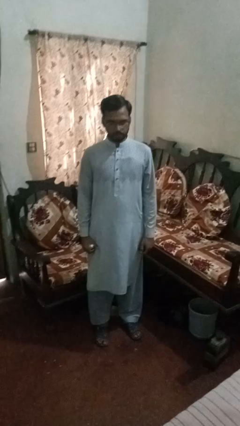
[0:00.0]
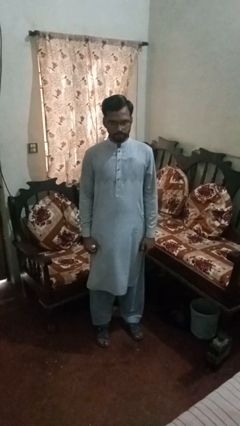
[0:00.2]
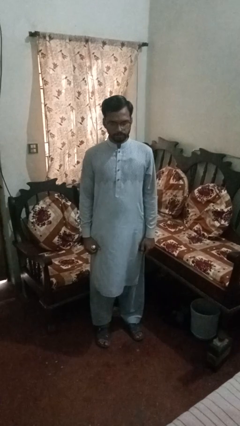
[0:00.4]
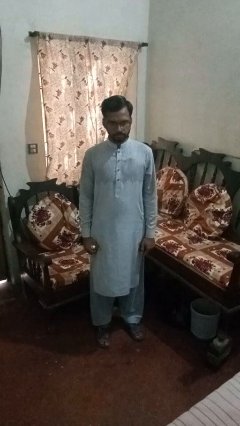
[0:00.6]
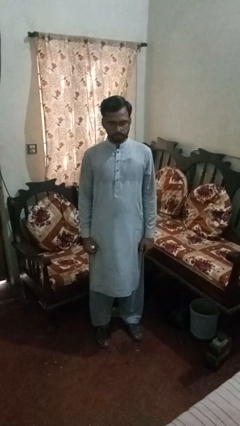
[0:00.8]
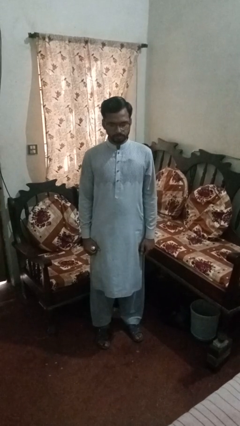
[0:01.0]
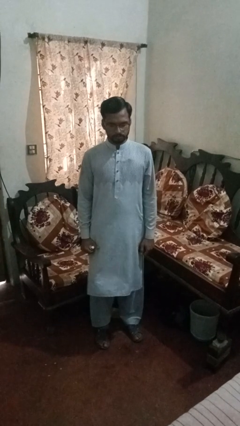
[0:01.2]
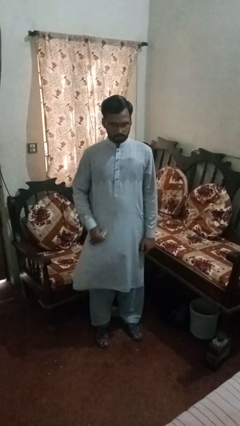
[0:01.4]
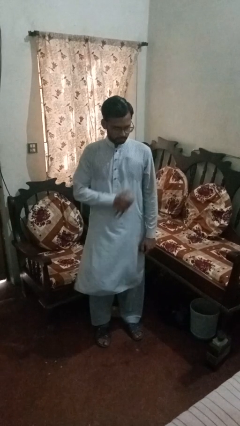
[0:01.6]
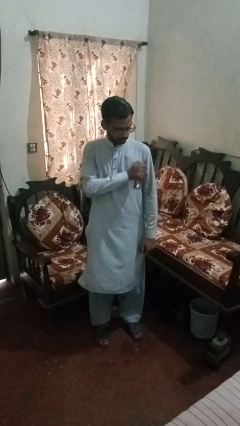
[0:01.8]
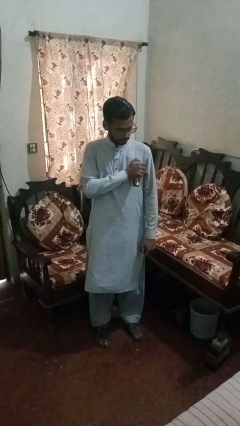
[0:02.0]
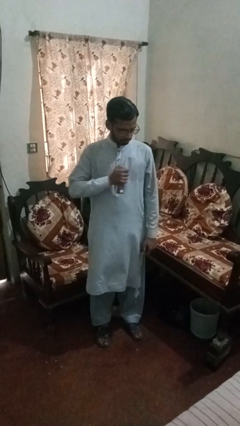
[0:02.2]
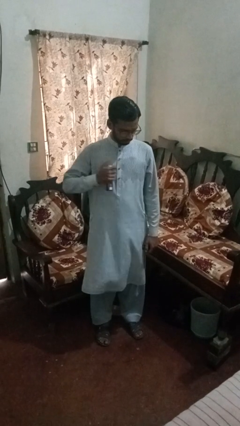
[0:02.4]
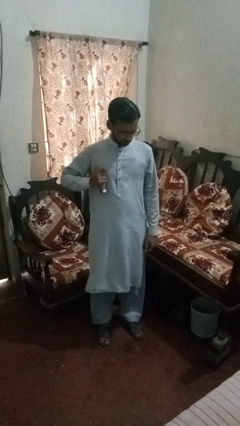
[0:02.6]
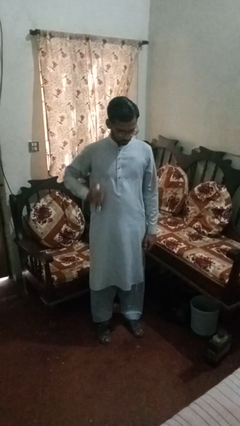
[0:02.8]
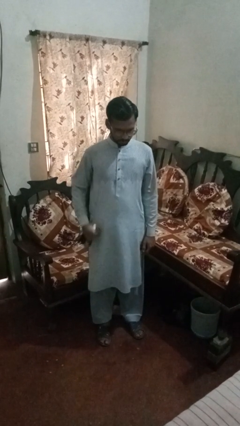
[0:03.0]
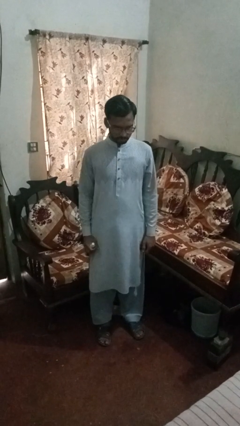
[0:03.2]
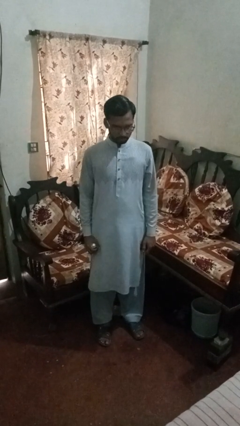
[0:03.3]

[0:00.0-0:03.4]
person applies deodorant

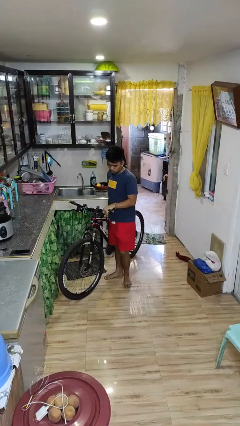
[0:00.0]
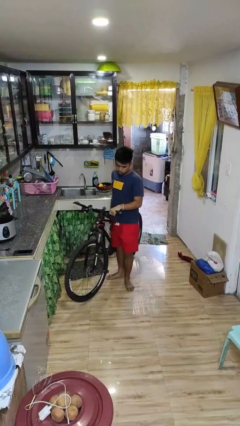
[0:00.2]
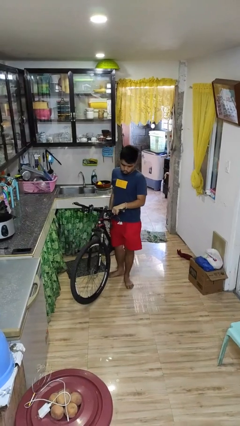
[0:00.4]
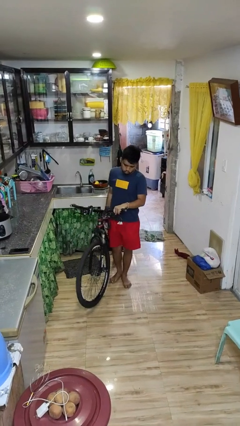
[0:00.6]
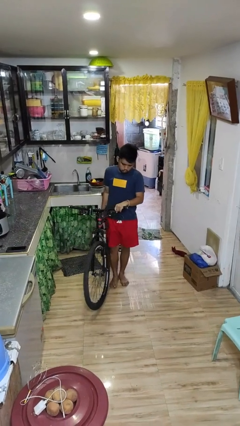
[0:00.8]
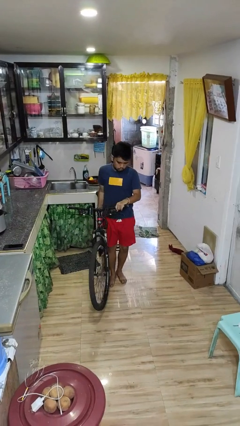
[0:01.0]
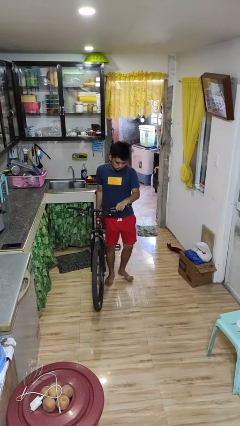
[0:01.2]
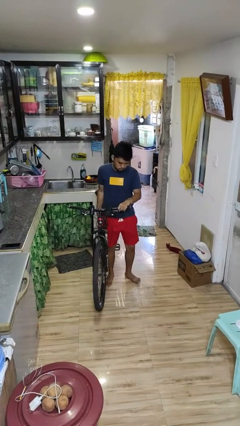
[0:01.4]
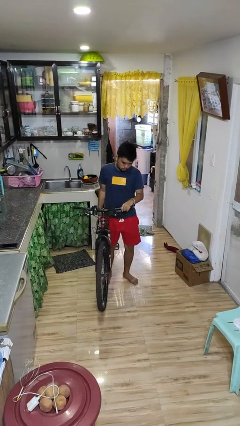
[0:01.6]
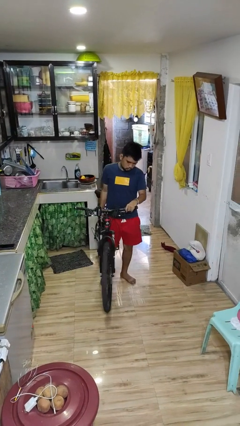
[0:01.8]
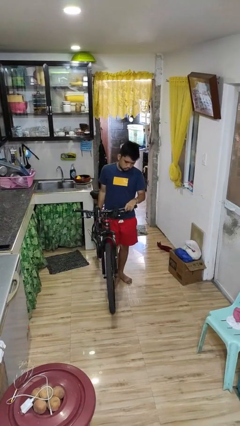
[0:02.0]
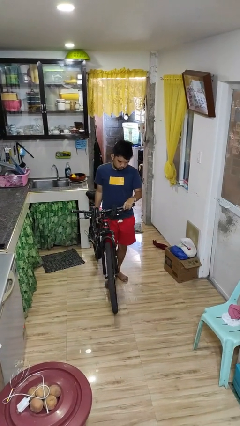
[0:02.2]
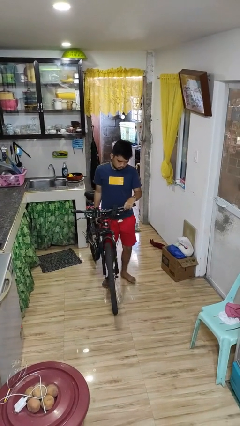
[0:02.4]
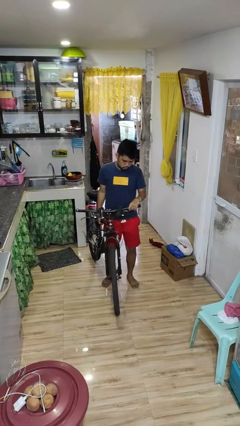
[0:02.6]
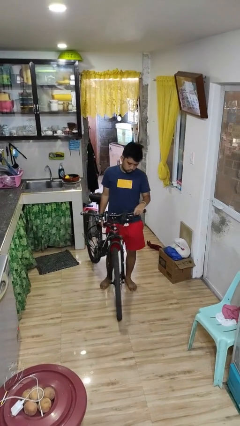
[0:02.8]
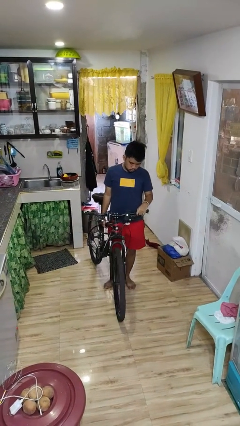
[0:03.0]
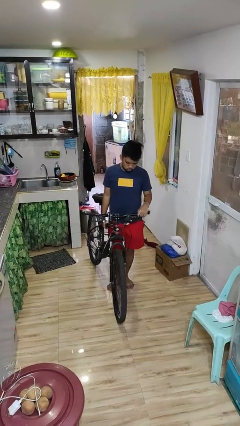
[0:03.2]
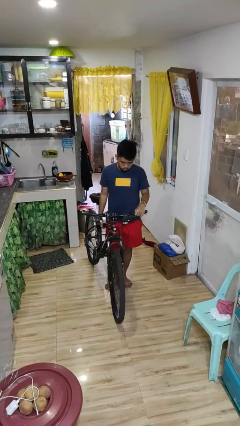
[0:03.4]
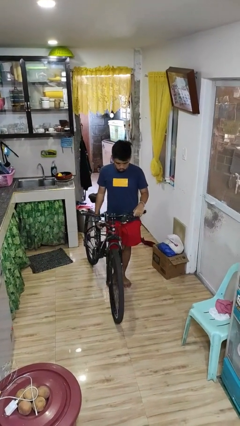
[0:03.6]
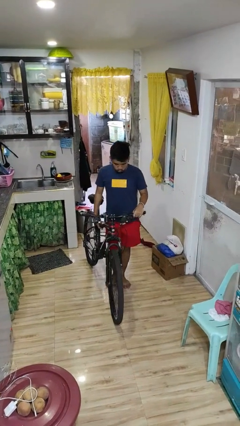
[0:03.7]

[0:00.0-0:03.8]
person carries bicycle

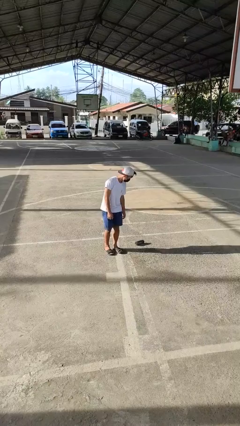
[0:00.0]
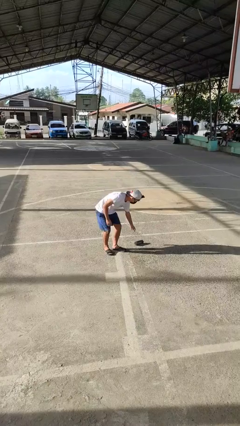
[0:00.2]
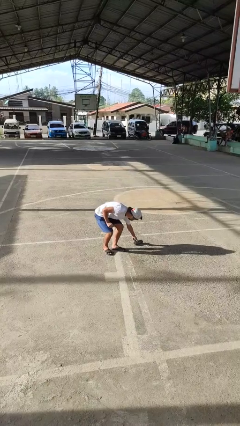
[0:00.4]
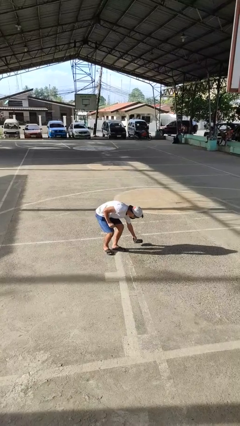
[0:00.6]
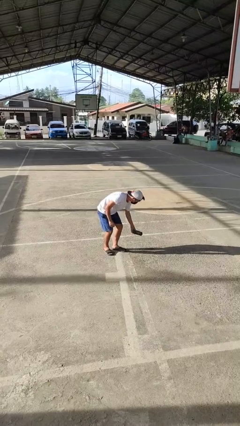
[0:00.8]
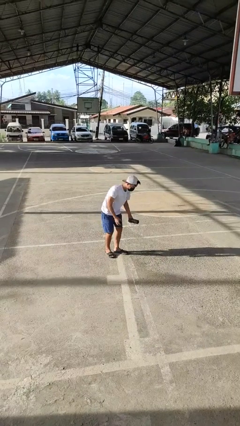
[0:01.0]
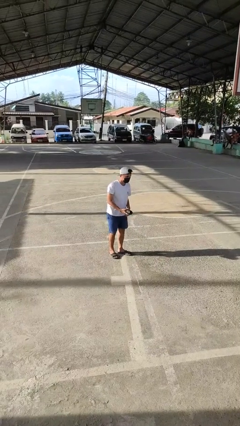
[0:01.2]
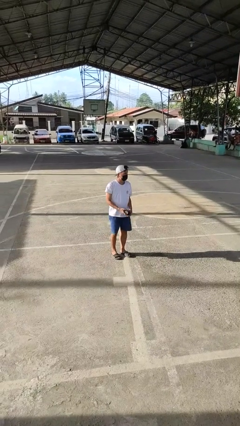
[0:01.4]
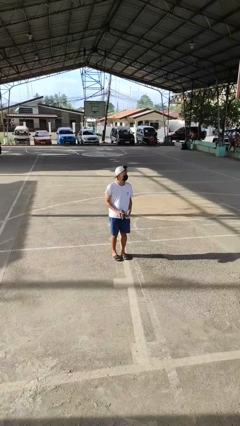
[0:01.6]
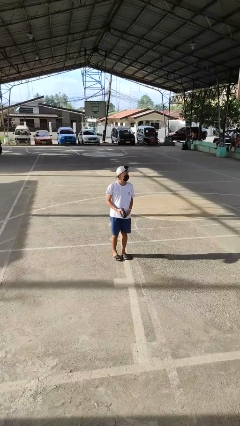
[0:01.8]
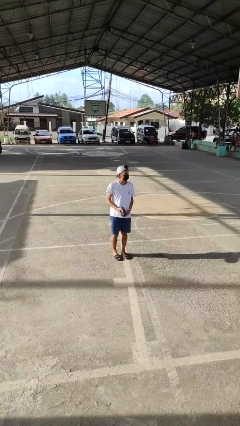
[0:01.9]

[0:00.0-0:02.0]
person picks up object from floor

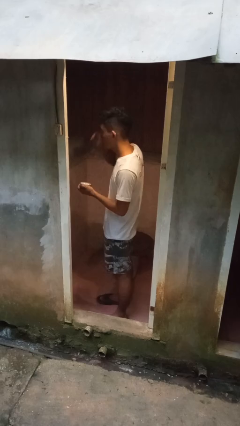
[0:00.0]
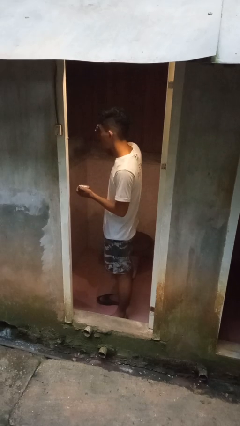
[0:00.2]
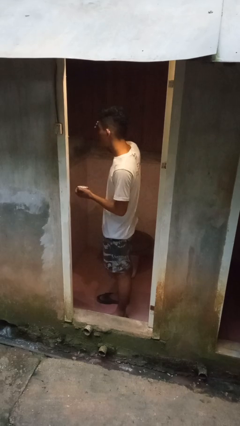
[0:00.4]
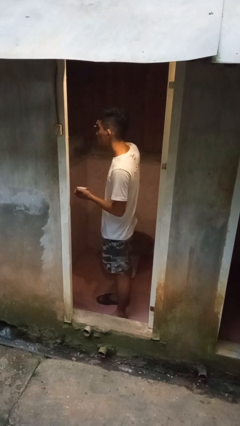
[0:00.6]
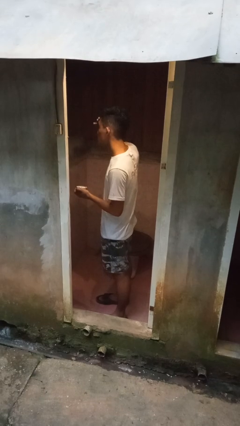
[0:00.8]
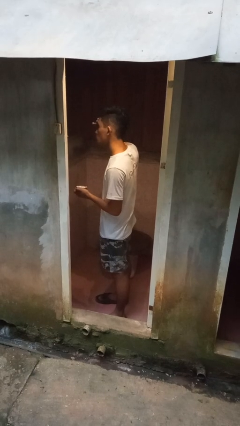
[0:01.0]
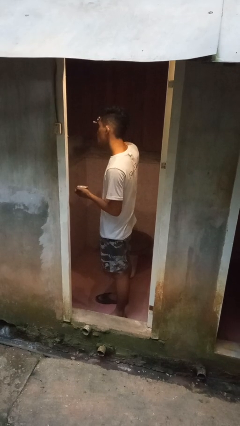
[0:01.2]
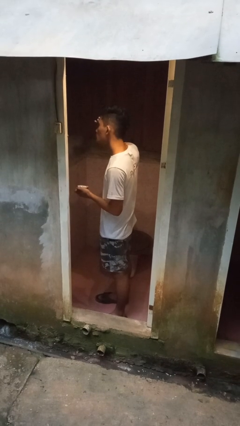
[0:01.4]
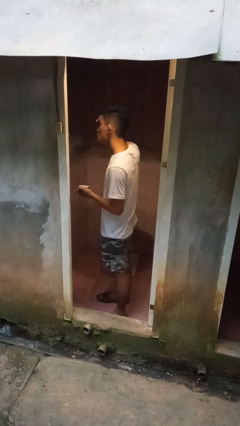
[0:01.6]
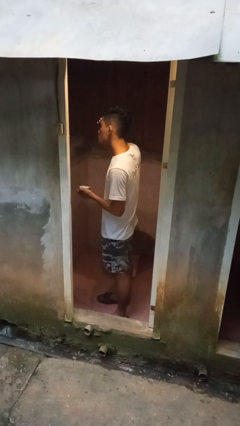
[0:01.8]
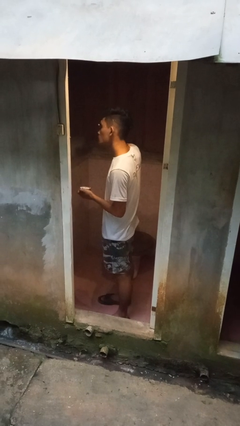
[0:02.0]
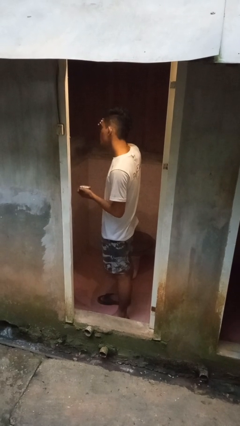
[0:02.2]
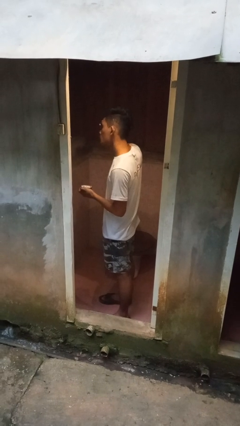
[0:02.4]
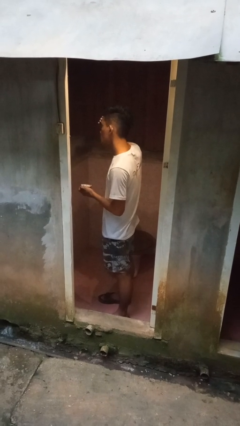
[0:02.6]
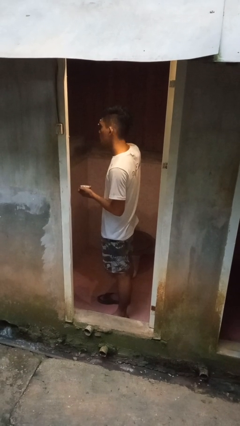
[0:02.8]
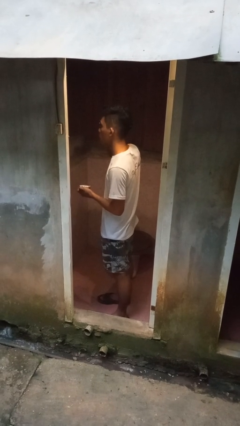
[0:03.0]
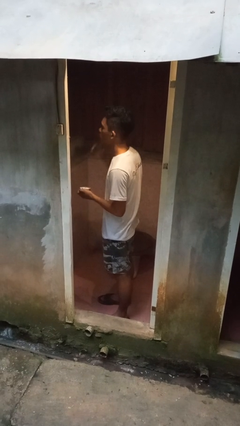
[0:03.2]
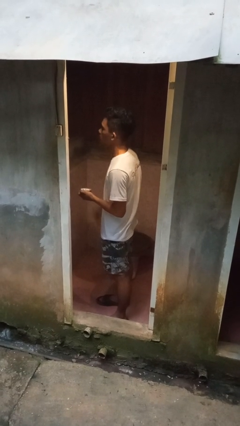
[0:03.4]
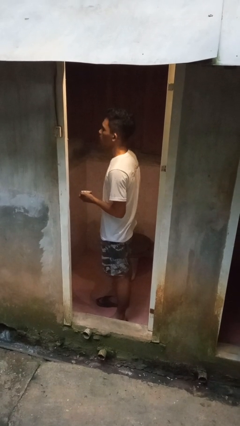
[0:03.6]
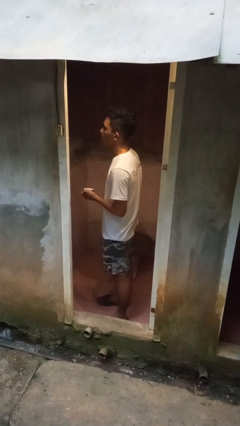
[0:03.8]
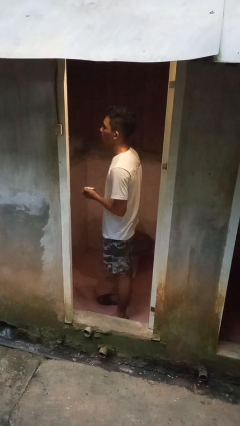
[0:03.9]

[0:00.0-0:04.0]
person applies facial moisturizer

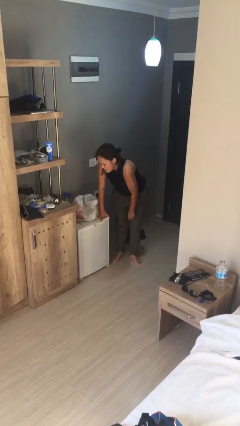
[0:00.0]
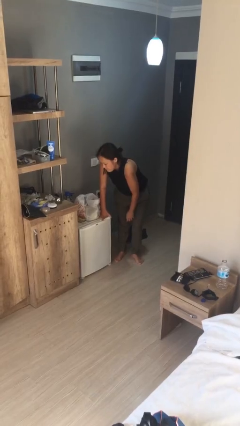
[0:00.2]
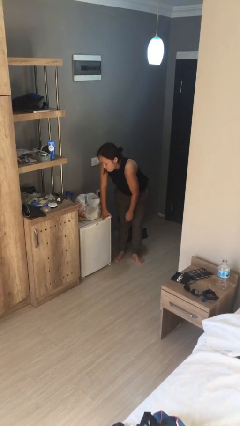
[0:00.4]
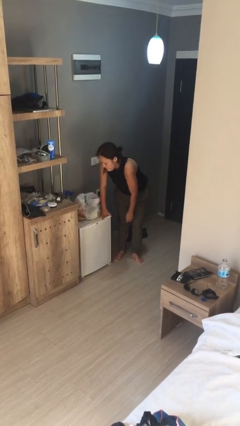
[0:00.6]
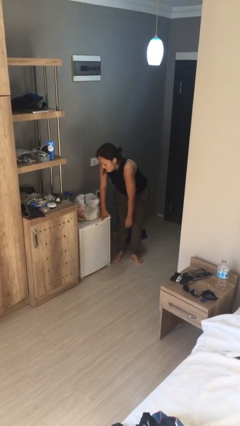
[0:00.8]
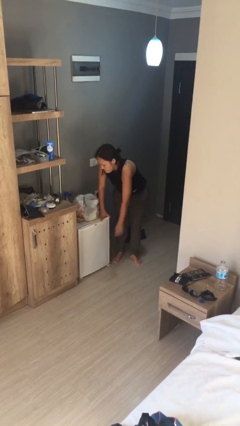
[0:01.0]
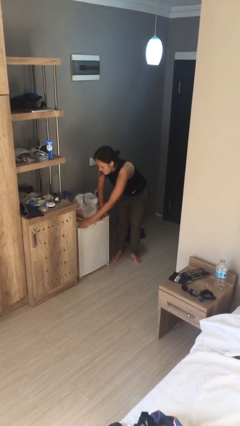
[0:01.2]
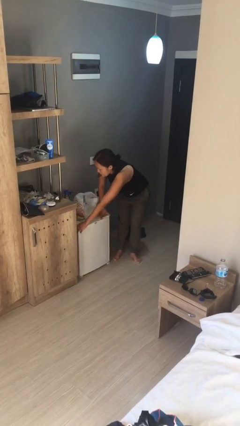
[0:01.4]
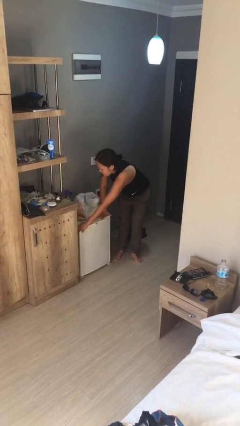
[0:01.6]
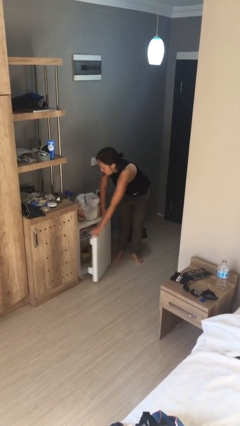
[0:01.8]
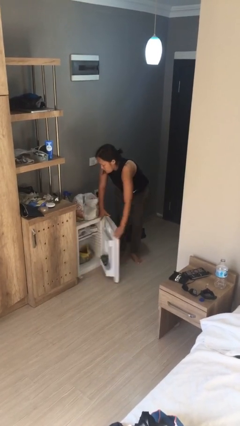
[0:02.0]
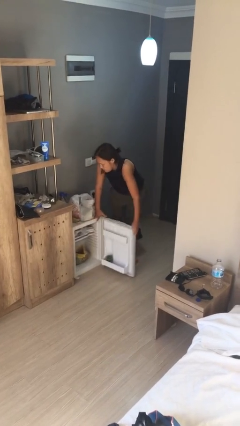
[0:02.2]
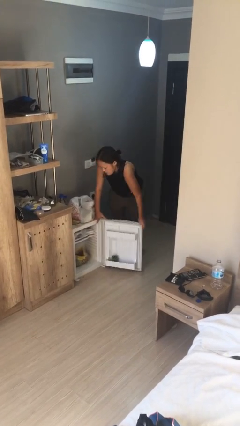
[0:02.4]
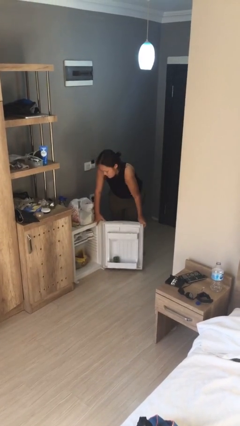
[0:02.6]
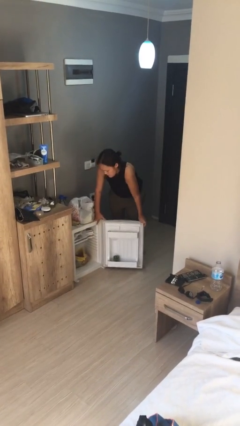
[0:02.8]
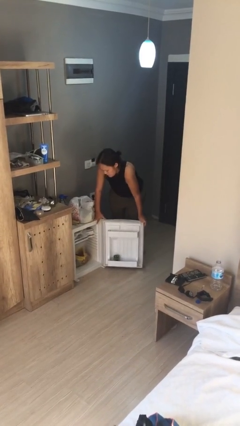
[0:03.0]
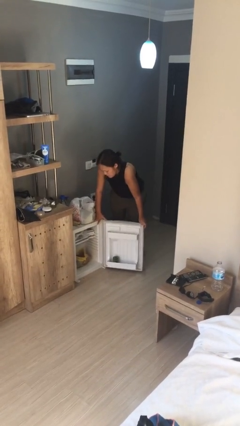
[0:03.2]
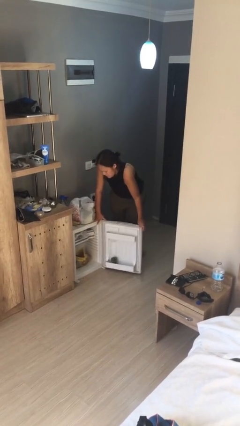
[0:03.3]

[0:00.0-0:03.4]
person opens refrigerator

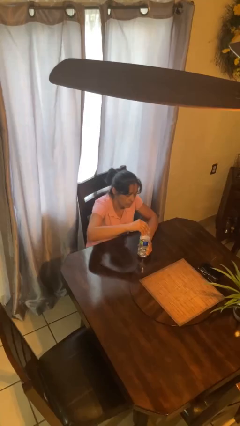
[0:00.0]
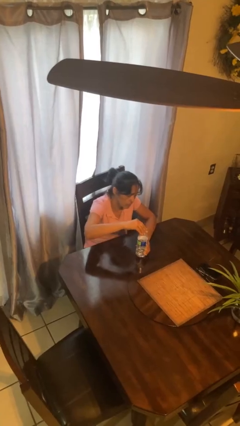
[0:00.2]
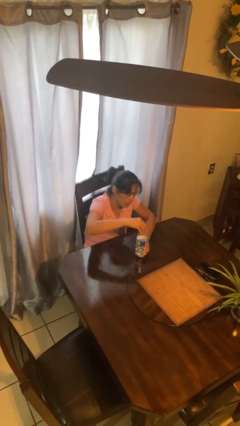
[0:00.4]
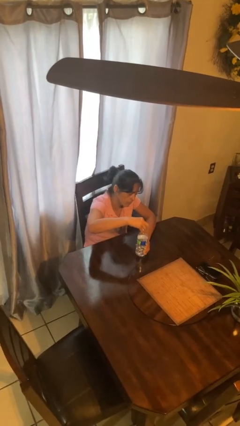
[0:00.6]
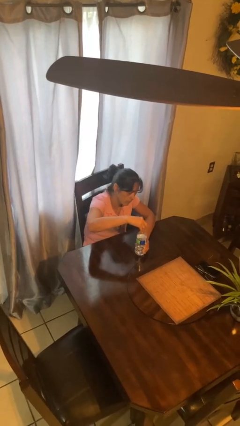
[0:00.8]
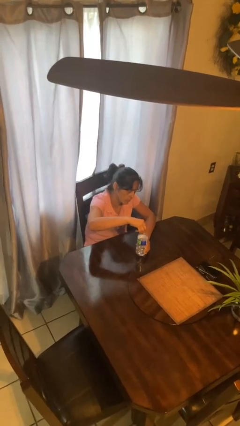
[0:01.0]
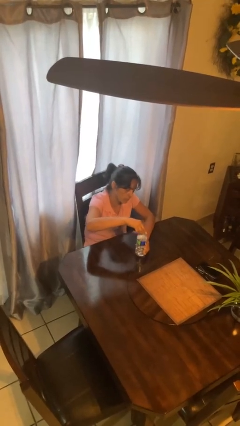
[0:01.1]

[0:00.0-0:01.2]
person screws lid to bottle
